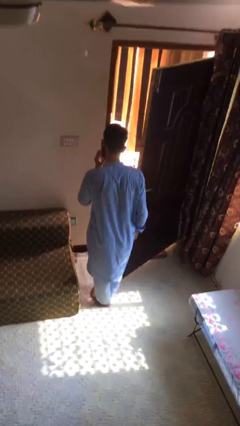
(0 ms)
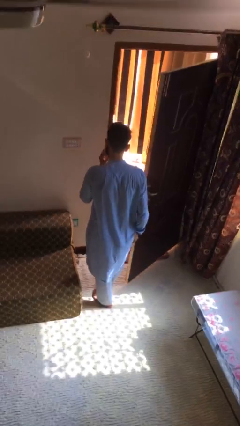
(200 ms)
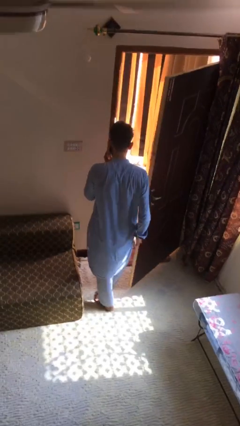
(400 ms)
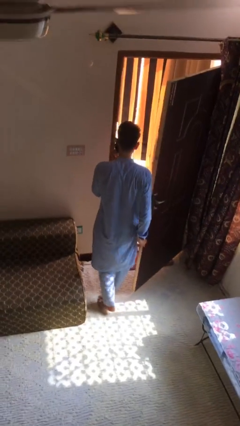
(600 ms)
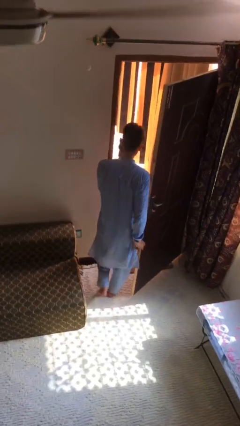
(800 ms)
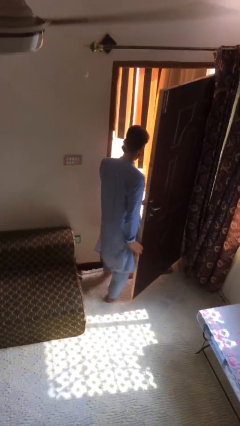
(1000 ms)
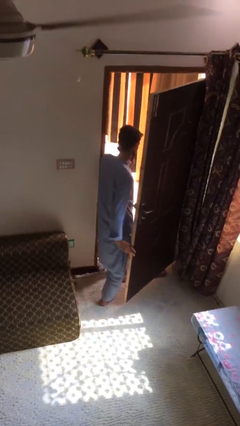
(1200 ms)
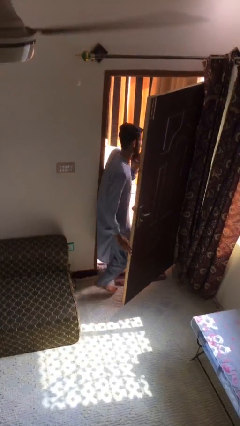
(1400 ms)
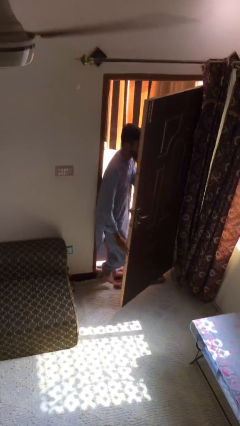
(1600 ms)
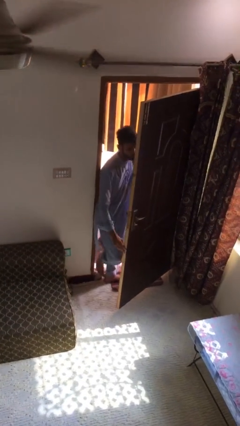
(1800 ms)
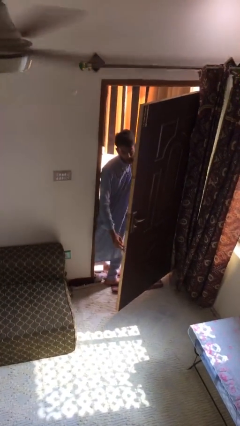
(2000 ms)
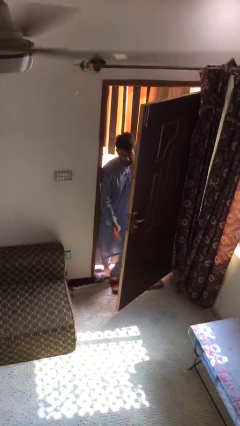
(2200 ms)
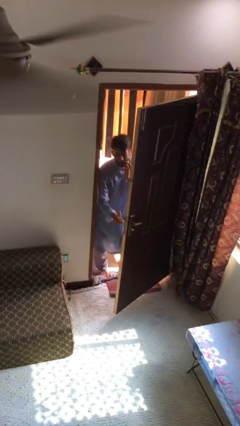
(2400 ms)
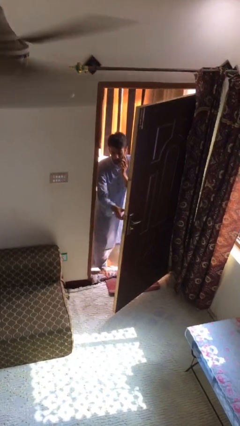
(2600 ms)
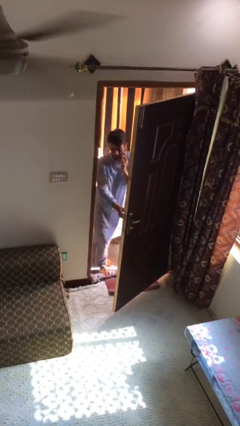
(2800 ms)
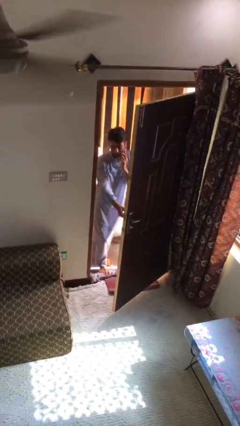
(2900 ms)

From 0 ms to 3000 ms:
person exits scene through structure

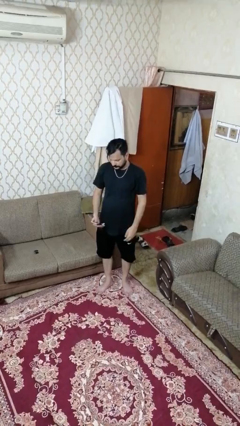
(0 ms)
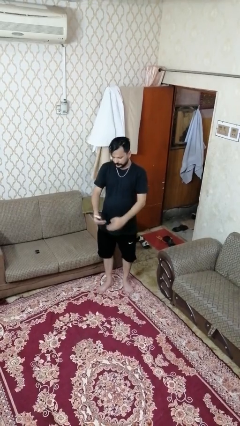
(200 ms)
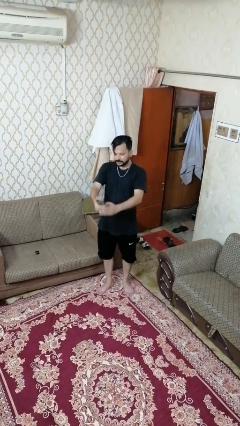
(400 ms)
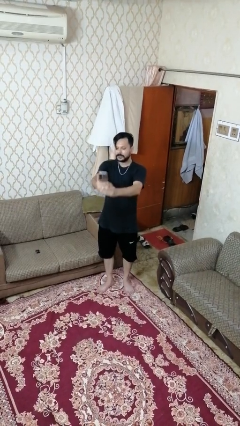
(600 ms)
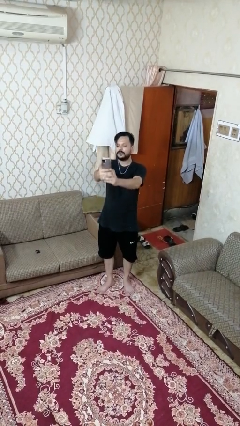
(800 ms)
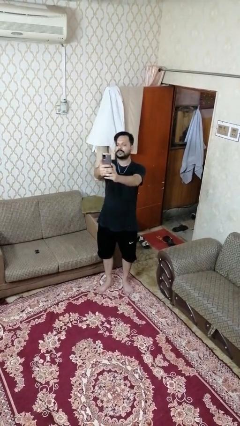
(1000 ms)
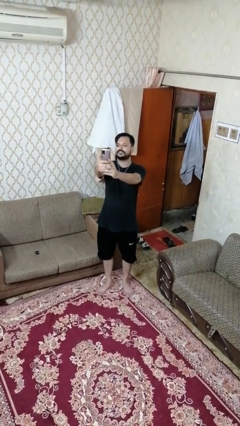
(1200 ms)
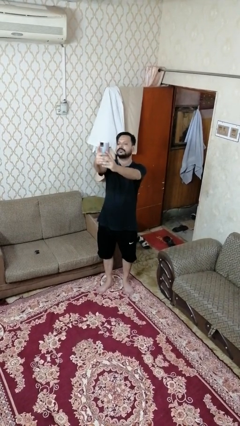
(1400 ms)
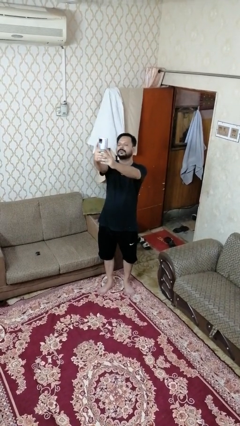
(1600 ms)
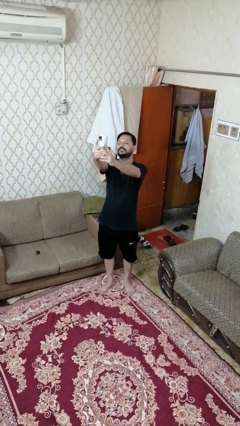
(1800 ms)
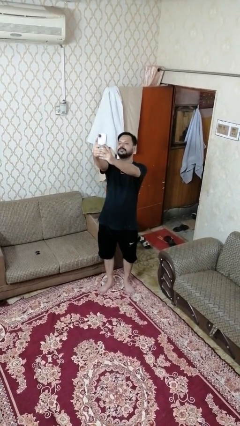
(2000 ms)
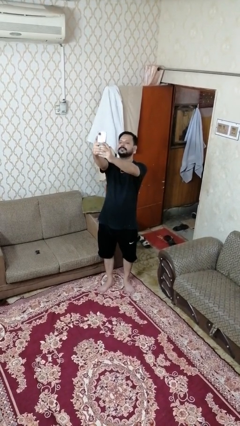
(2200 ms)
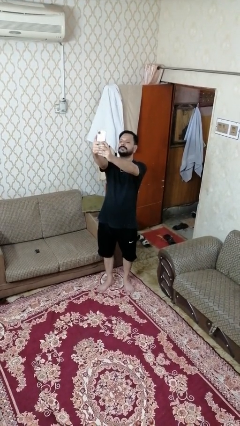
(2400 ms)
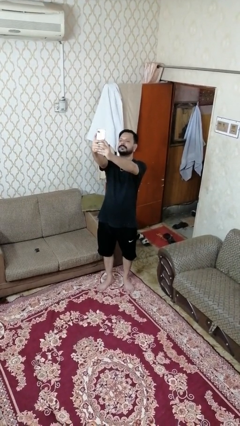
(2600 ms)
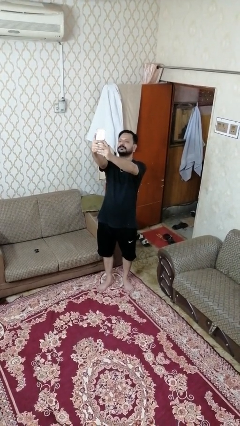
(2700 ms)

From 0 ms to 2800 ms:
person takes selfie

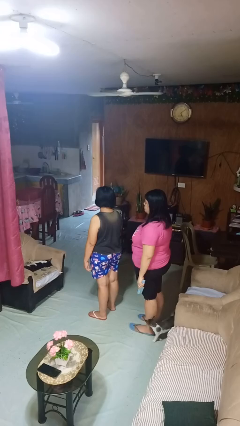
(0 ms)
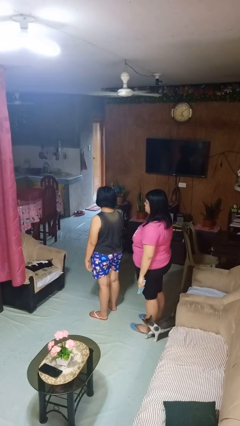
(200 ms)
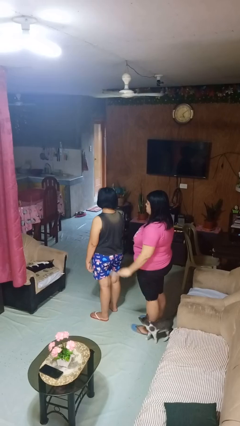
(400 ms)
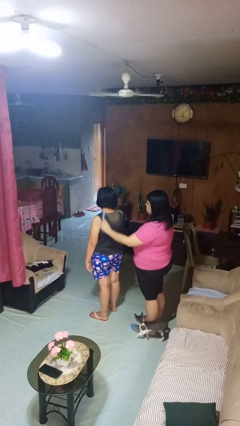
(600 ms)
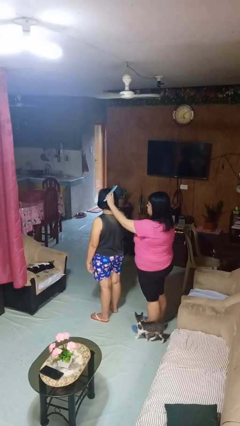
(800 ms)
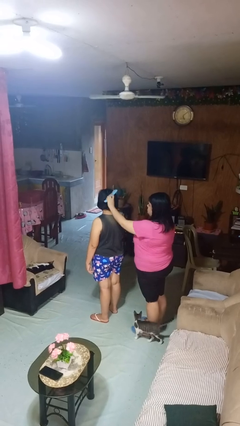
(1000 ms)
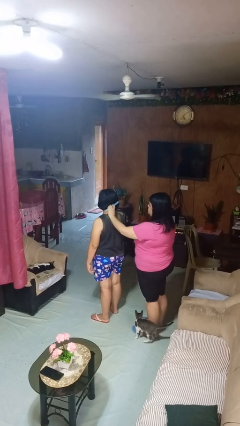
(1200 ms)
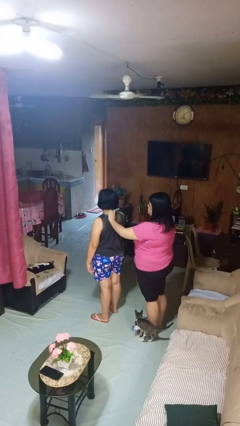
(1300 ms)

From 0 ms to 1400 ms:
person brushes hair of person

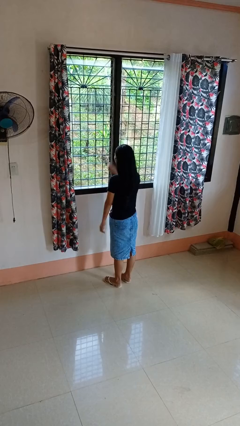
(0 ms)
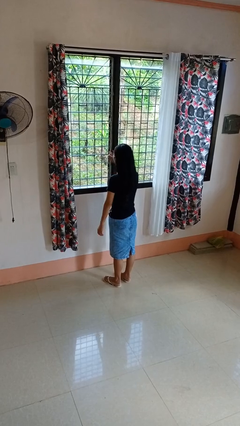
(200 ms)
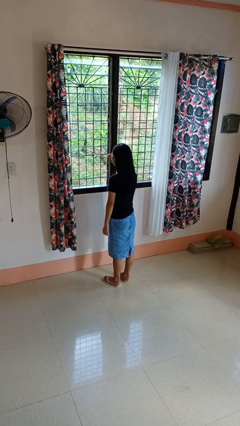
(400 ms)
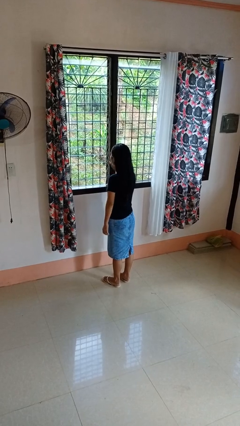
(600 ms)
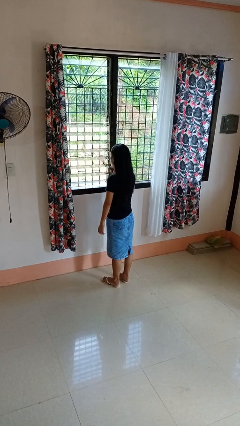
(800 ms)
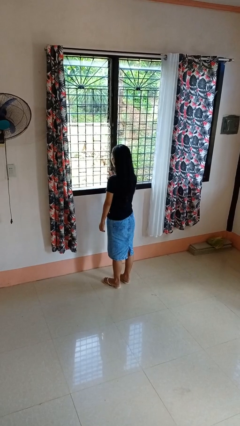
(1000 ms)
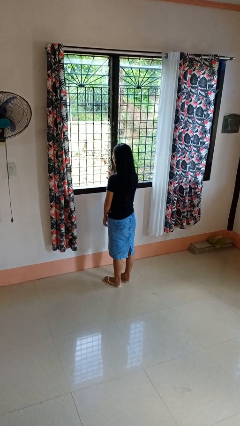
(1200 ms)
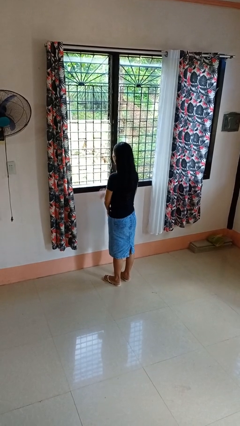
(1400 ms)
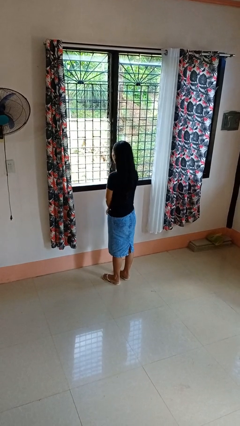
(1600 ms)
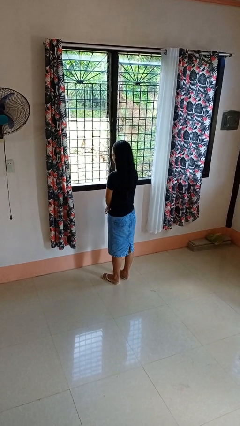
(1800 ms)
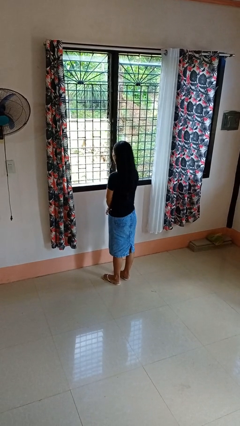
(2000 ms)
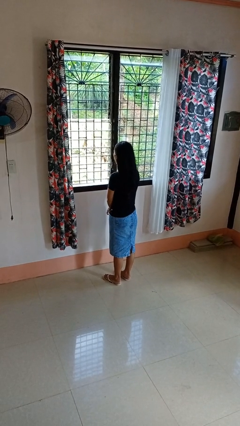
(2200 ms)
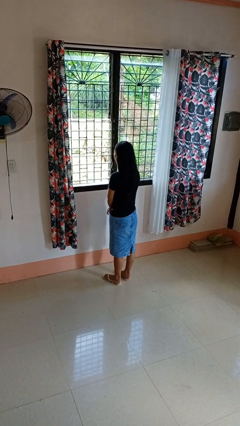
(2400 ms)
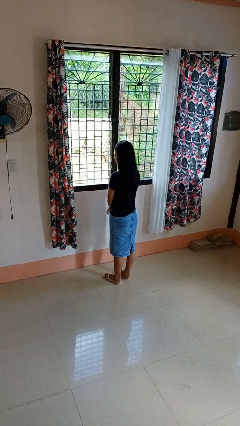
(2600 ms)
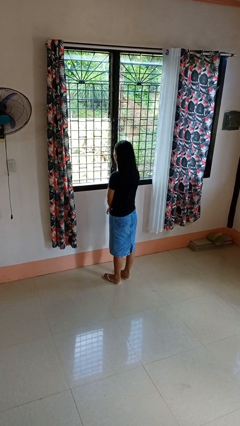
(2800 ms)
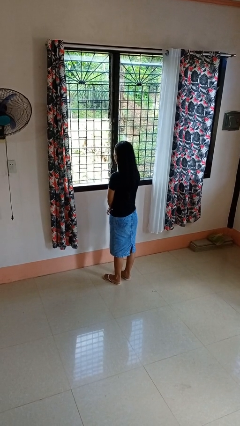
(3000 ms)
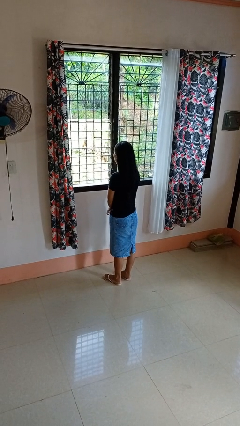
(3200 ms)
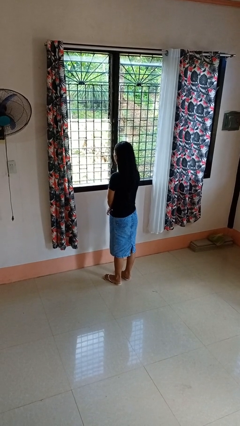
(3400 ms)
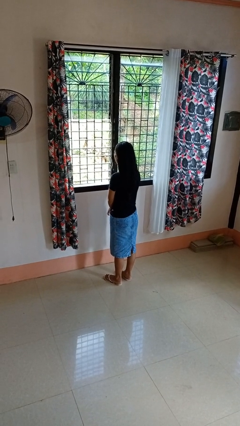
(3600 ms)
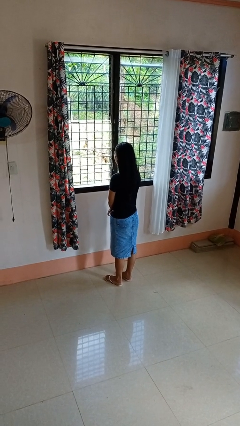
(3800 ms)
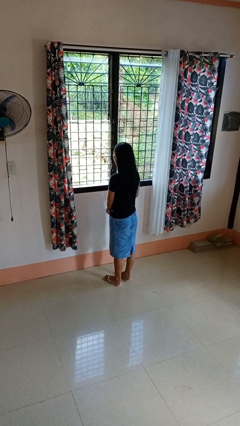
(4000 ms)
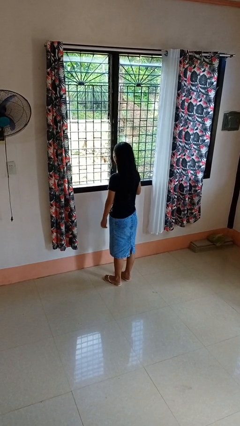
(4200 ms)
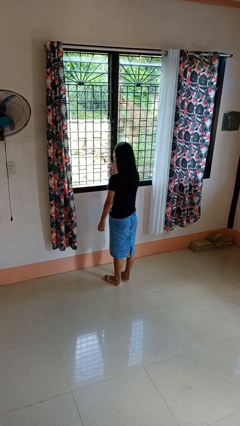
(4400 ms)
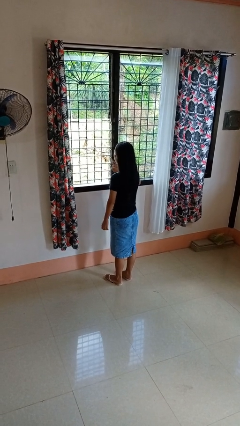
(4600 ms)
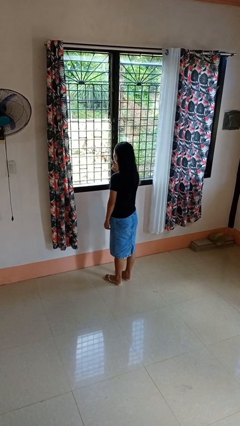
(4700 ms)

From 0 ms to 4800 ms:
person opens home window

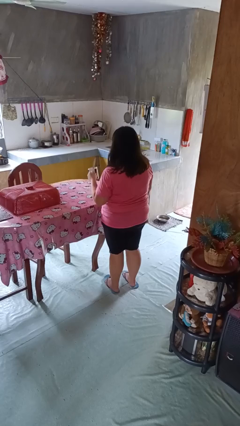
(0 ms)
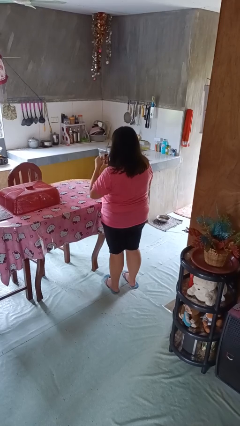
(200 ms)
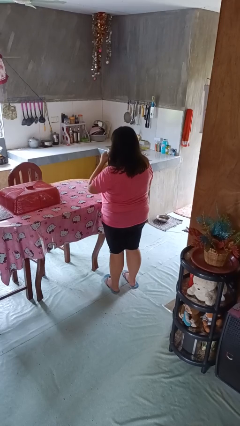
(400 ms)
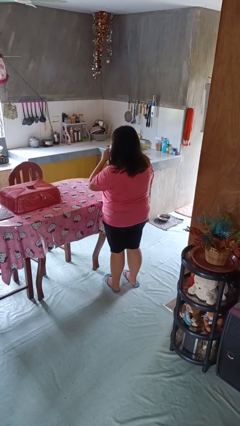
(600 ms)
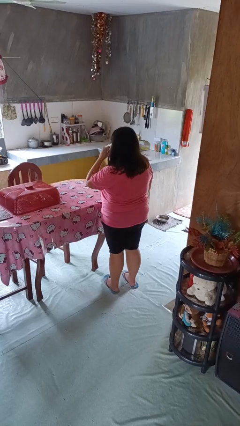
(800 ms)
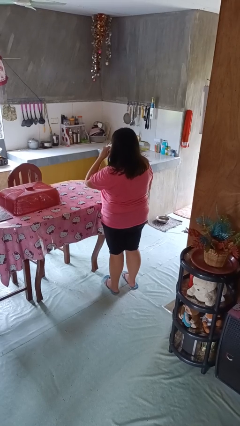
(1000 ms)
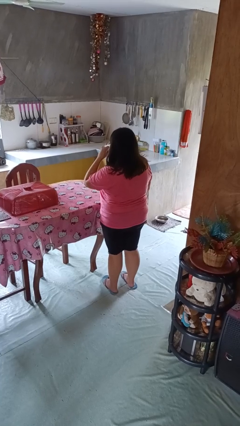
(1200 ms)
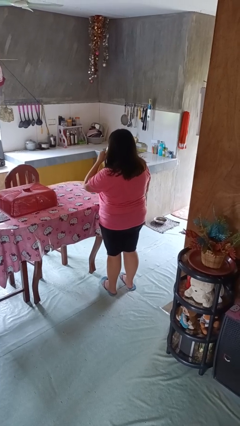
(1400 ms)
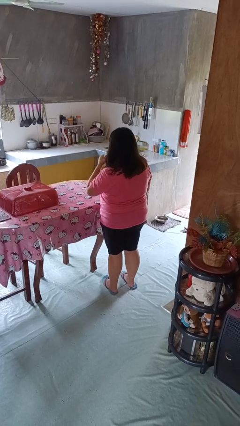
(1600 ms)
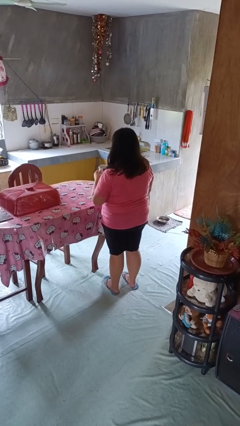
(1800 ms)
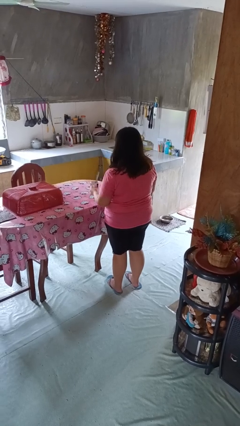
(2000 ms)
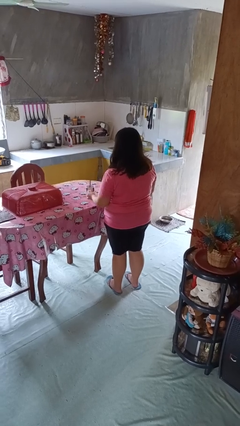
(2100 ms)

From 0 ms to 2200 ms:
person drinks from mug

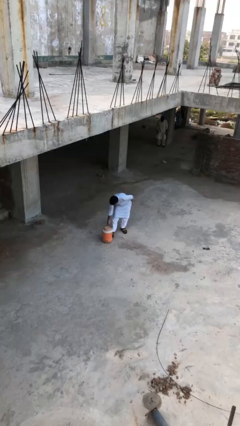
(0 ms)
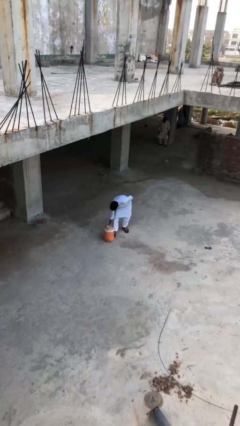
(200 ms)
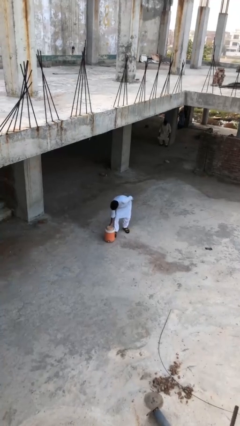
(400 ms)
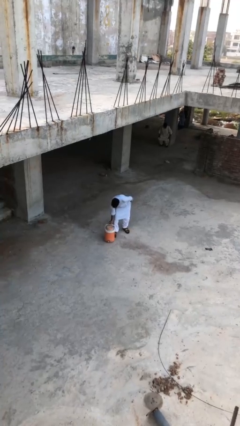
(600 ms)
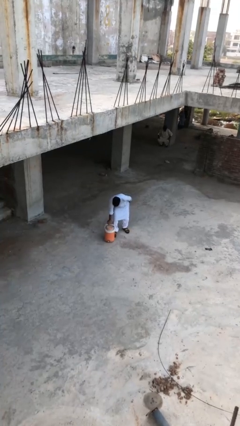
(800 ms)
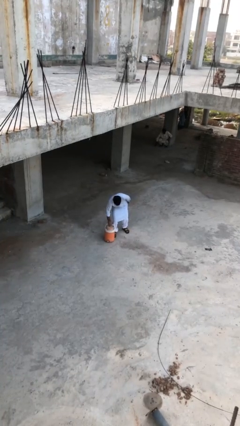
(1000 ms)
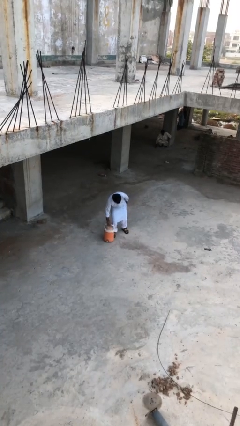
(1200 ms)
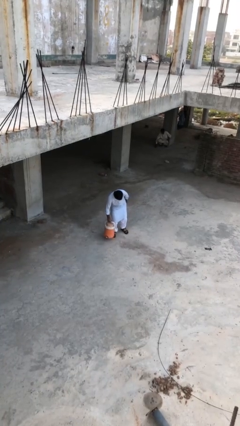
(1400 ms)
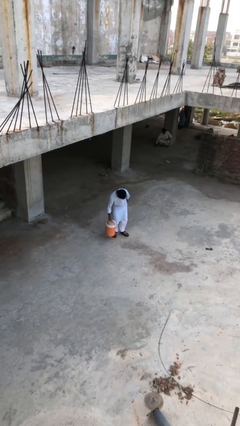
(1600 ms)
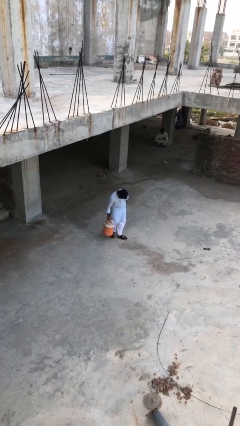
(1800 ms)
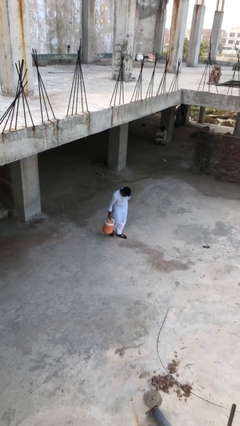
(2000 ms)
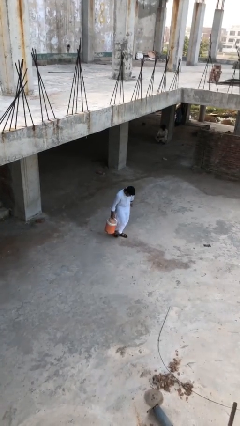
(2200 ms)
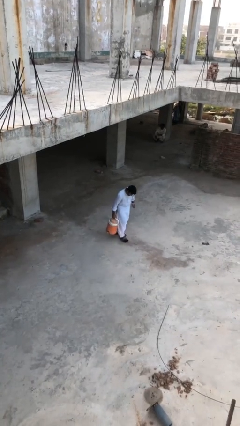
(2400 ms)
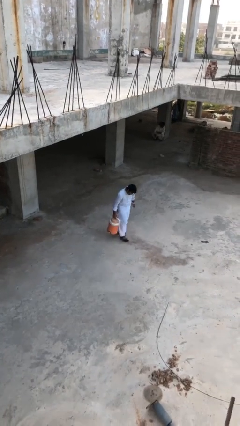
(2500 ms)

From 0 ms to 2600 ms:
person picks up object from floor

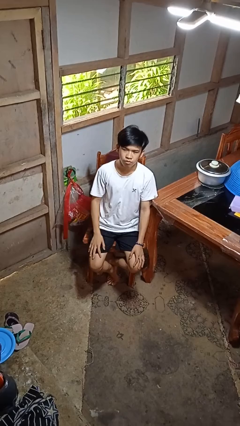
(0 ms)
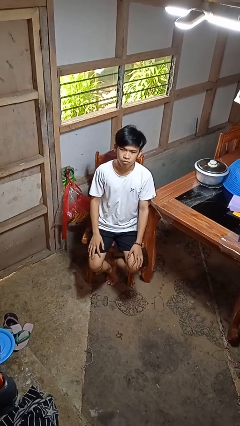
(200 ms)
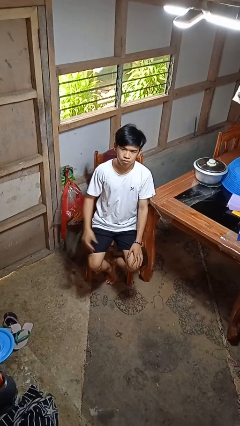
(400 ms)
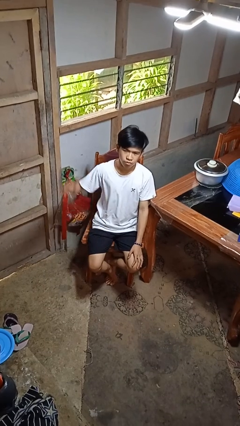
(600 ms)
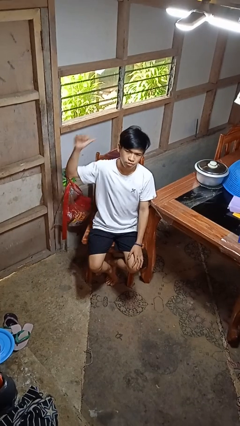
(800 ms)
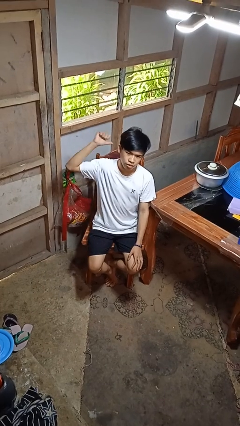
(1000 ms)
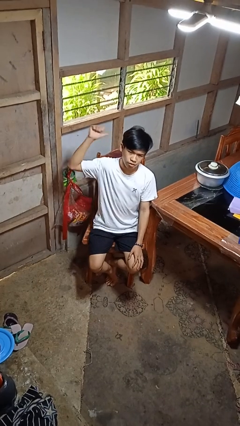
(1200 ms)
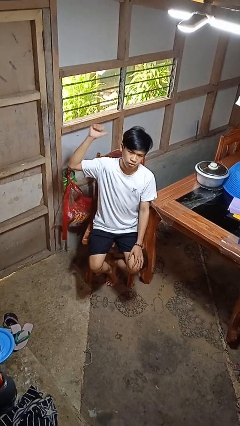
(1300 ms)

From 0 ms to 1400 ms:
person gestures behind me
